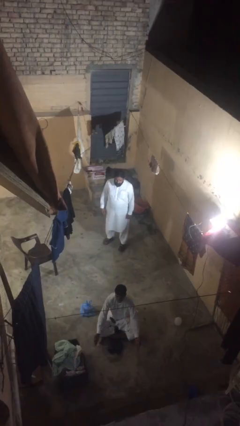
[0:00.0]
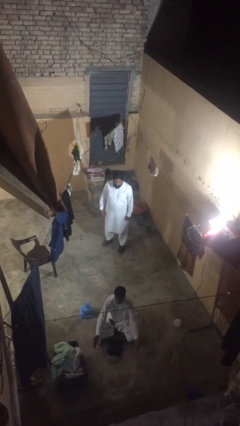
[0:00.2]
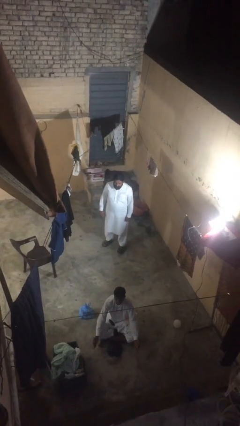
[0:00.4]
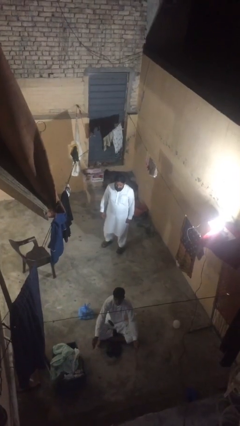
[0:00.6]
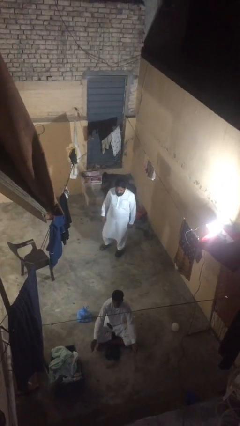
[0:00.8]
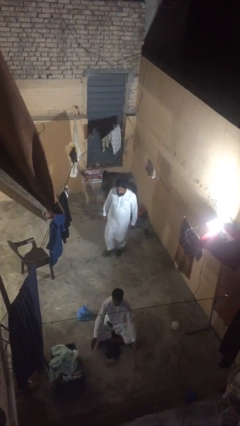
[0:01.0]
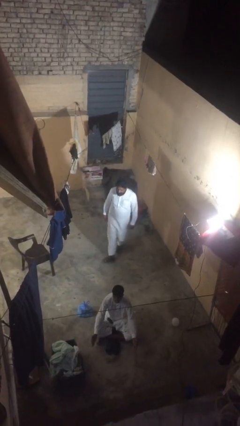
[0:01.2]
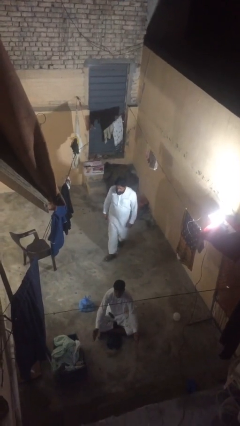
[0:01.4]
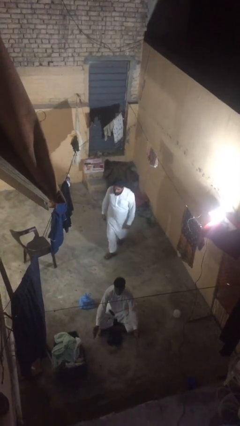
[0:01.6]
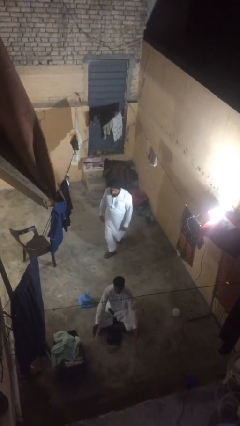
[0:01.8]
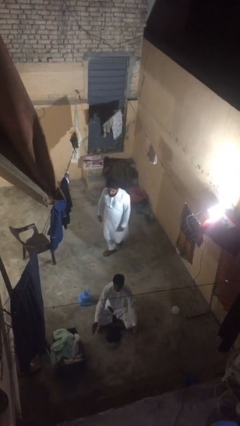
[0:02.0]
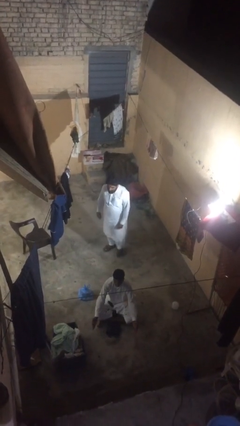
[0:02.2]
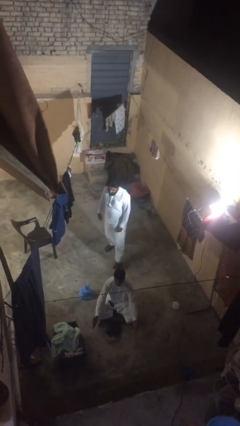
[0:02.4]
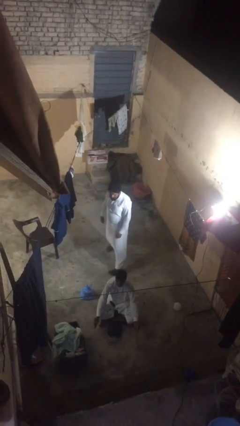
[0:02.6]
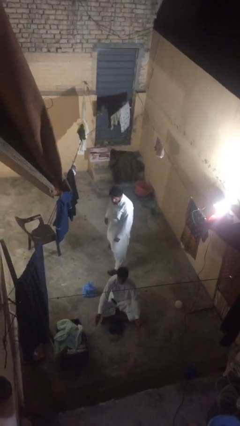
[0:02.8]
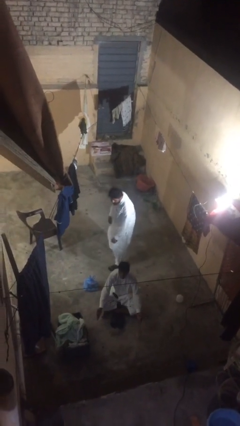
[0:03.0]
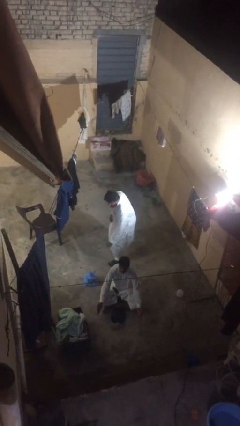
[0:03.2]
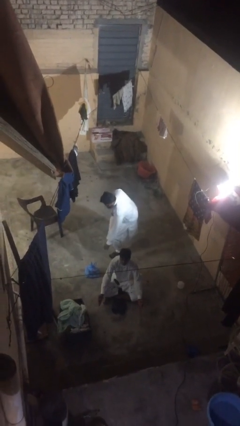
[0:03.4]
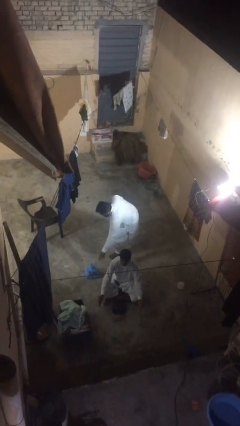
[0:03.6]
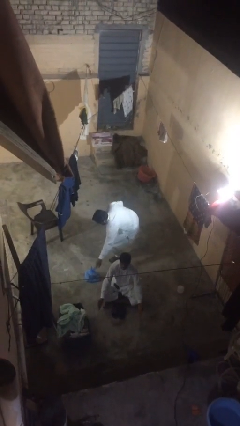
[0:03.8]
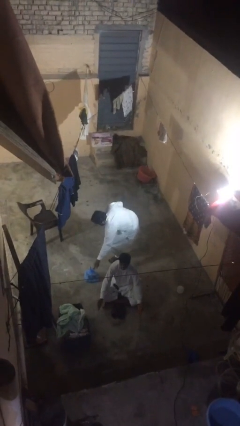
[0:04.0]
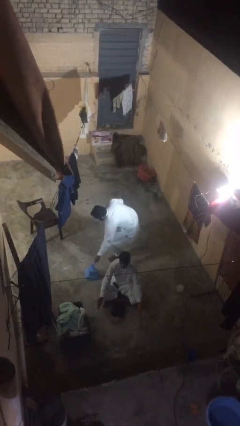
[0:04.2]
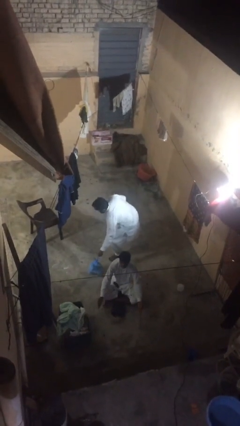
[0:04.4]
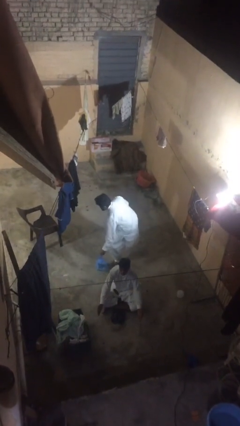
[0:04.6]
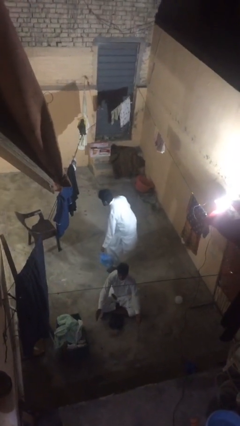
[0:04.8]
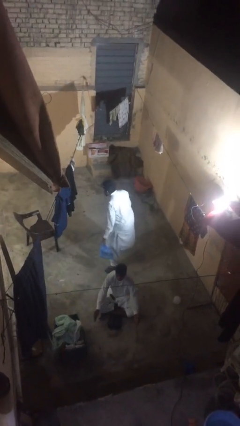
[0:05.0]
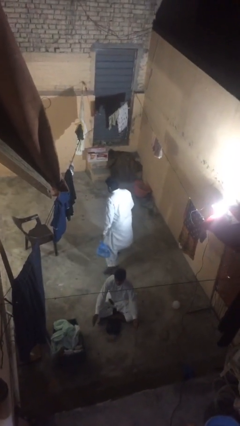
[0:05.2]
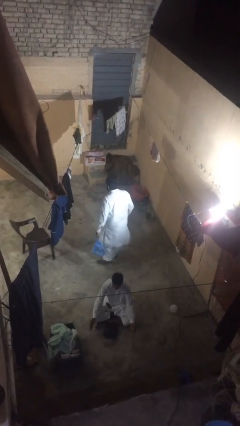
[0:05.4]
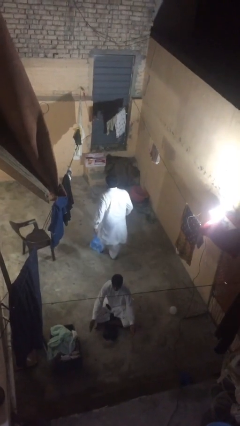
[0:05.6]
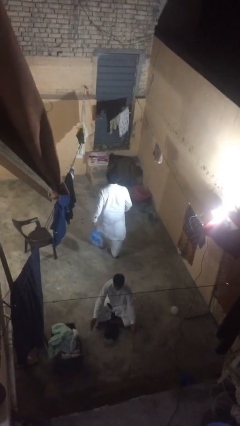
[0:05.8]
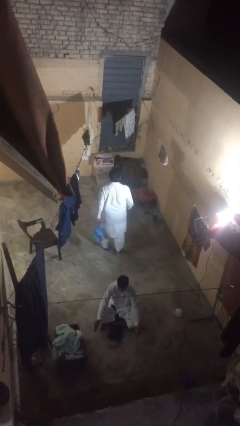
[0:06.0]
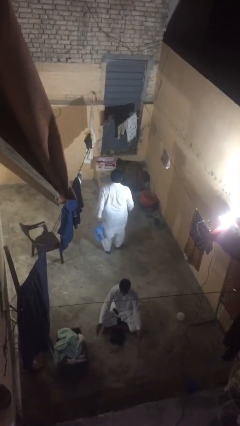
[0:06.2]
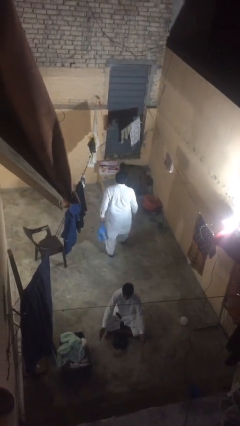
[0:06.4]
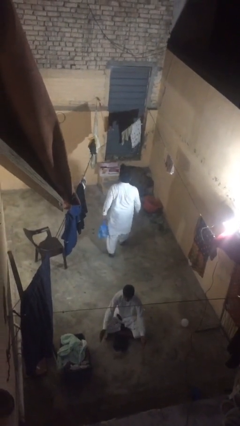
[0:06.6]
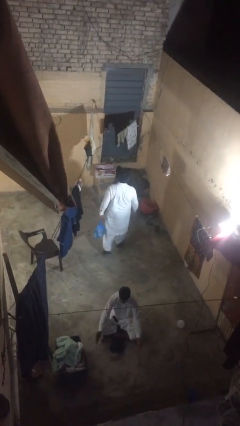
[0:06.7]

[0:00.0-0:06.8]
person steals object from person

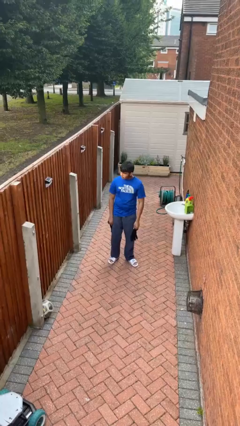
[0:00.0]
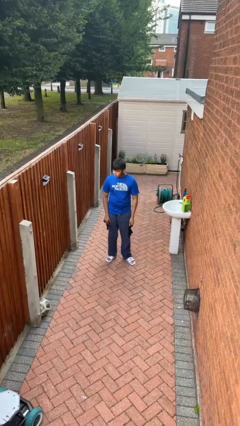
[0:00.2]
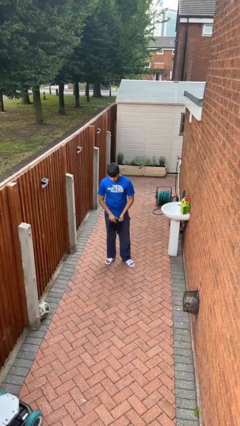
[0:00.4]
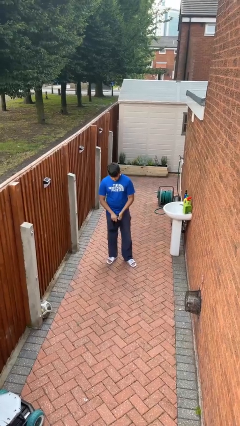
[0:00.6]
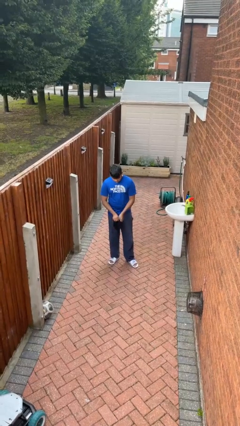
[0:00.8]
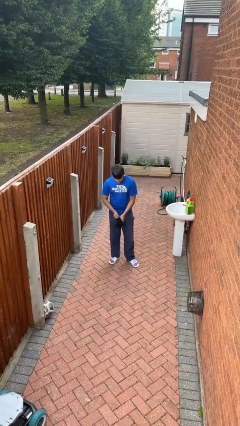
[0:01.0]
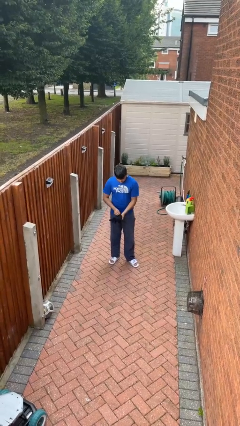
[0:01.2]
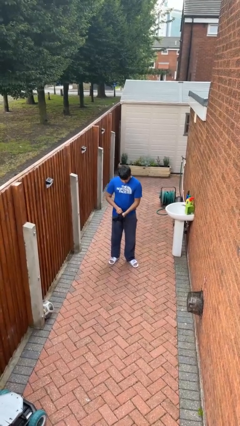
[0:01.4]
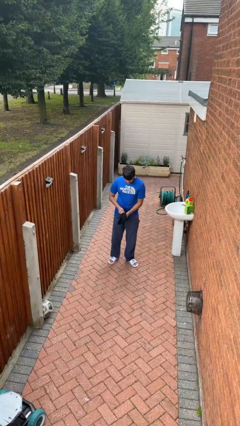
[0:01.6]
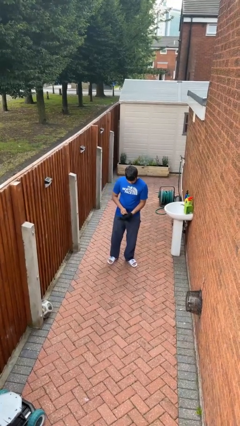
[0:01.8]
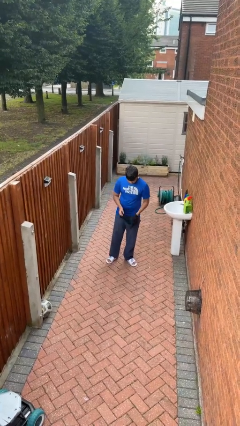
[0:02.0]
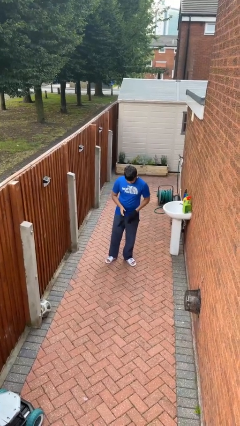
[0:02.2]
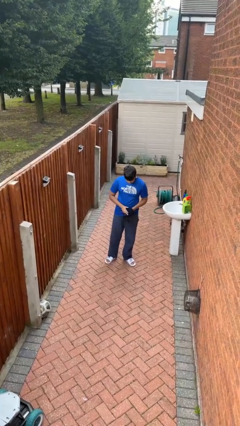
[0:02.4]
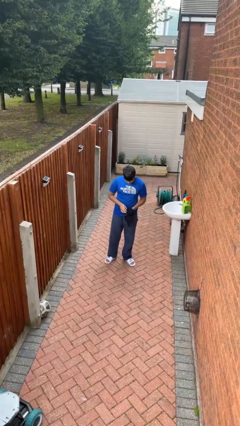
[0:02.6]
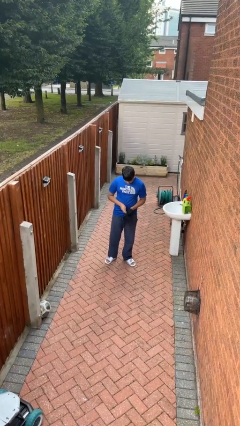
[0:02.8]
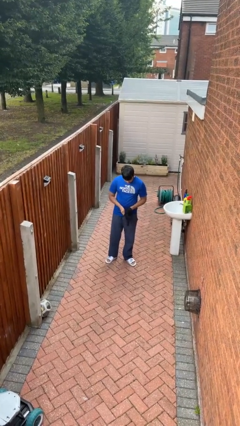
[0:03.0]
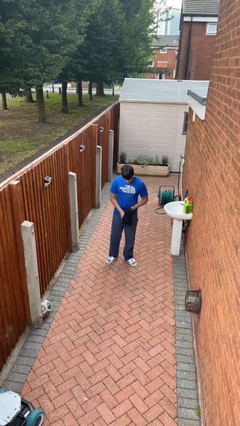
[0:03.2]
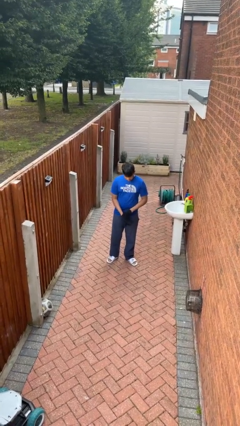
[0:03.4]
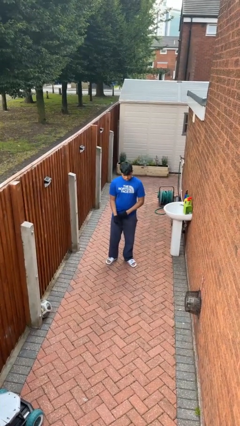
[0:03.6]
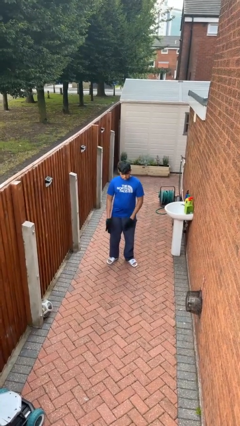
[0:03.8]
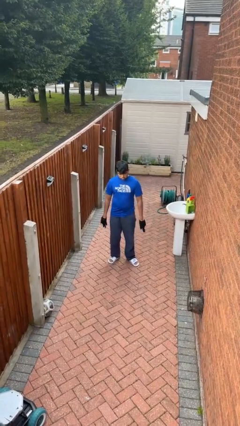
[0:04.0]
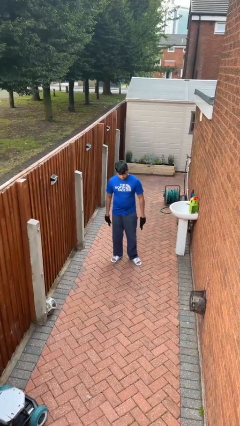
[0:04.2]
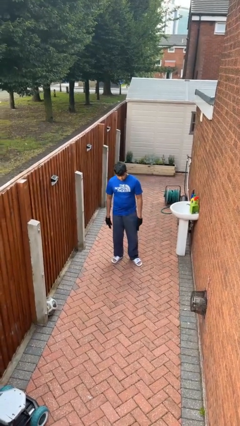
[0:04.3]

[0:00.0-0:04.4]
person puts on gloves

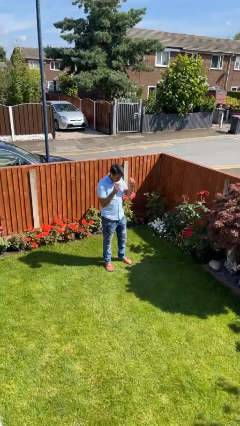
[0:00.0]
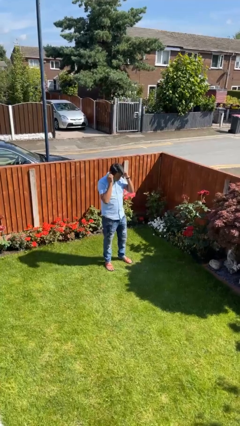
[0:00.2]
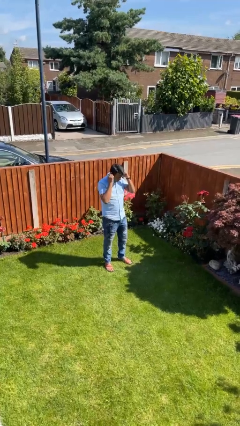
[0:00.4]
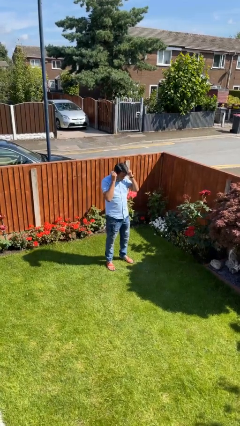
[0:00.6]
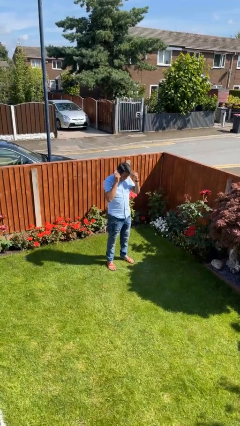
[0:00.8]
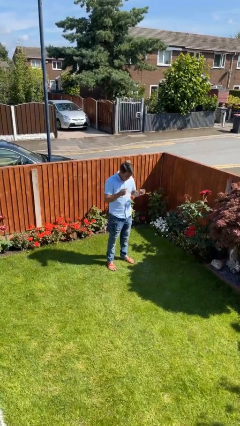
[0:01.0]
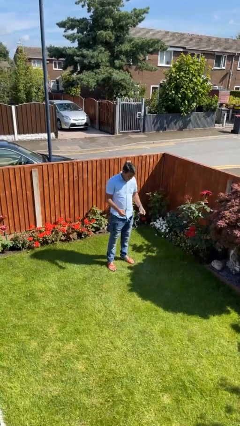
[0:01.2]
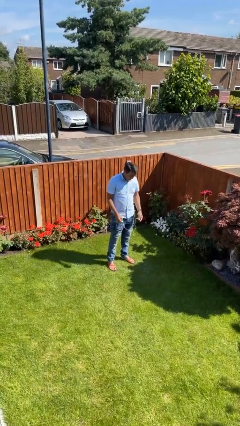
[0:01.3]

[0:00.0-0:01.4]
person takes off headphones

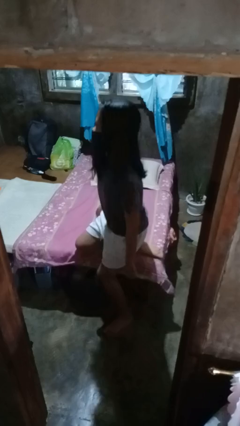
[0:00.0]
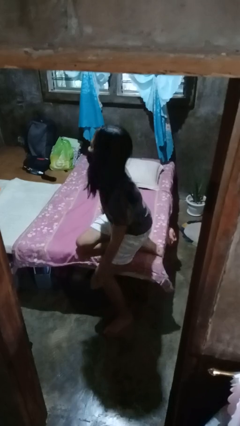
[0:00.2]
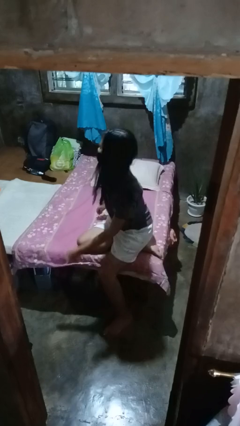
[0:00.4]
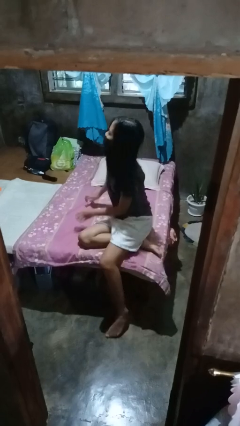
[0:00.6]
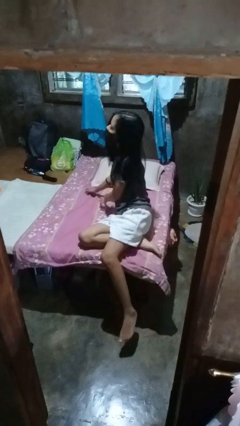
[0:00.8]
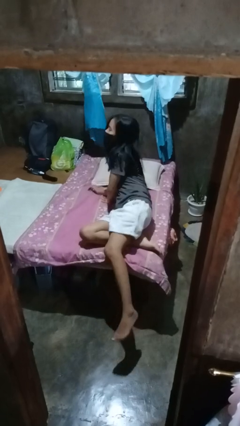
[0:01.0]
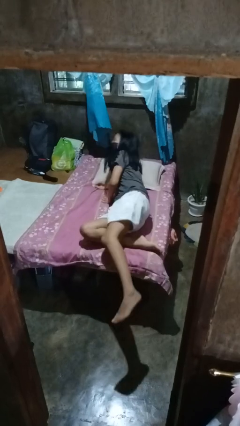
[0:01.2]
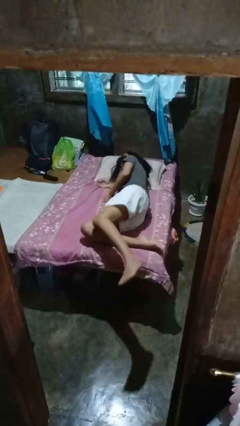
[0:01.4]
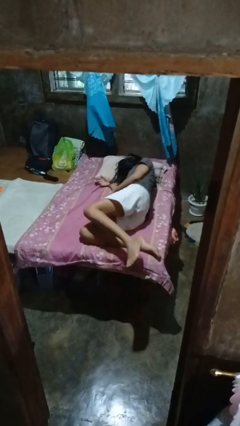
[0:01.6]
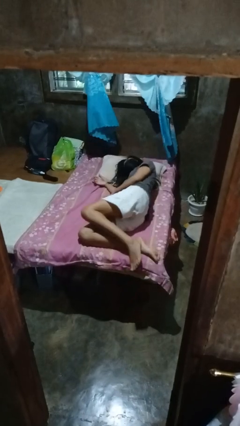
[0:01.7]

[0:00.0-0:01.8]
person lies down on bed

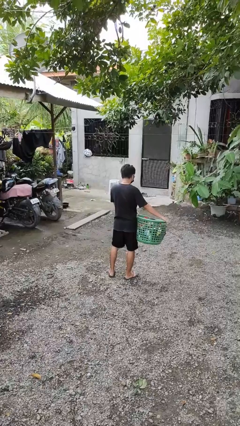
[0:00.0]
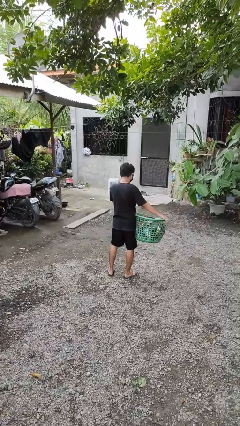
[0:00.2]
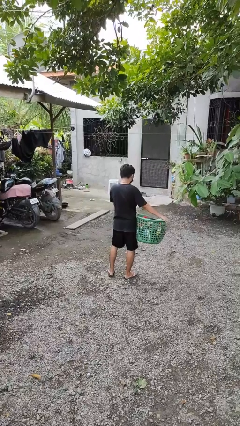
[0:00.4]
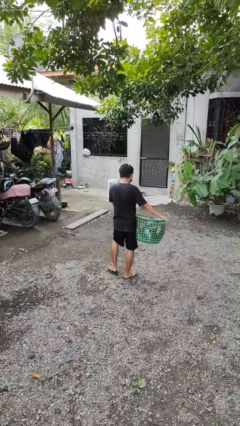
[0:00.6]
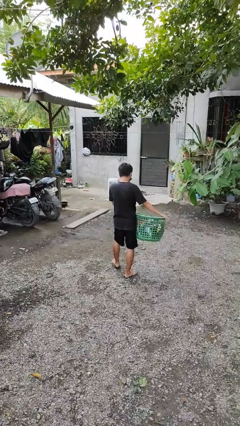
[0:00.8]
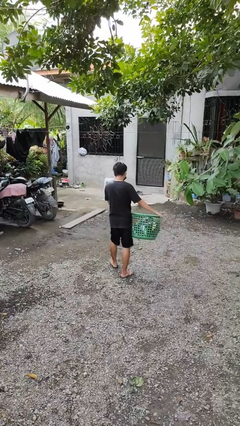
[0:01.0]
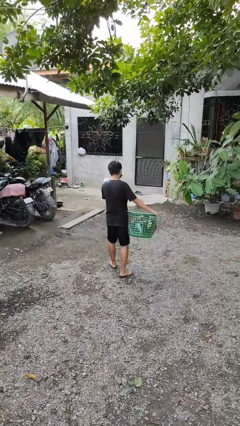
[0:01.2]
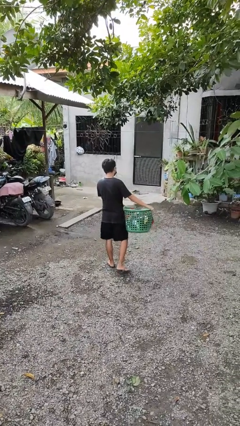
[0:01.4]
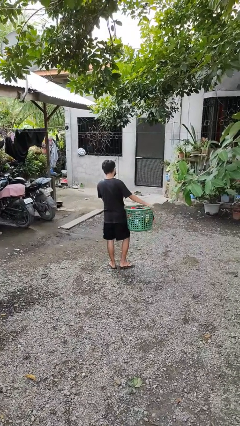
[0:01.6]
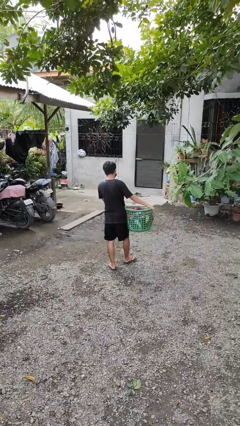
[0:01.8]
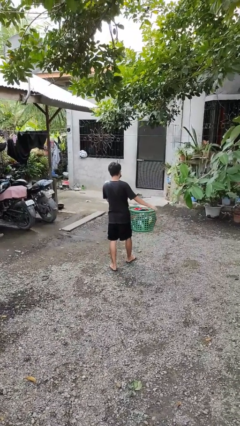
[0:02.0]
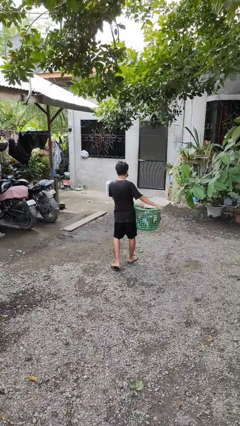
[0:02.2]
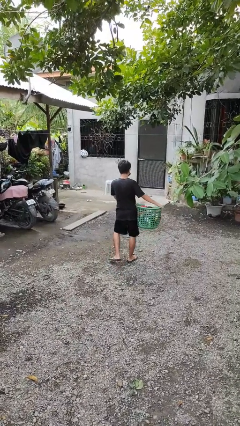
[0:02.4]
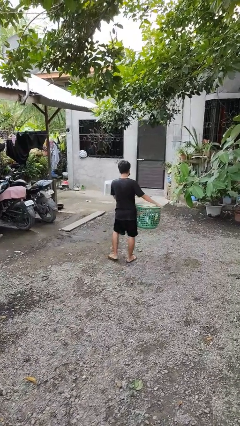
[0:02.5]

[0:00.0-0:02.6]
person carries laundry basket

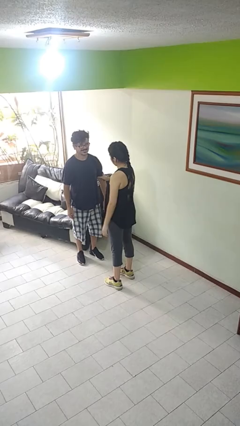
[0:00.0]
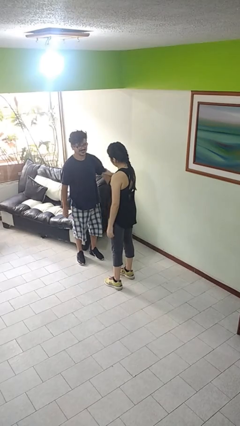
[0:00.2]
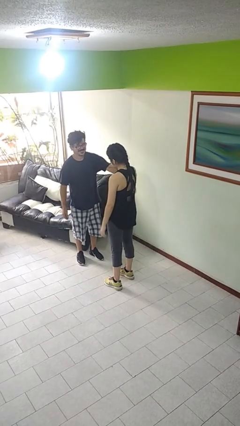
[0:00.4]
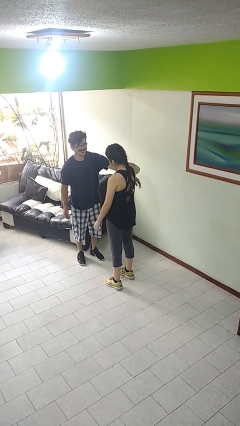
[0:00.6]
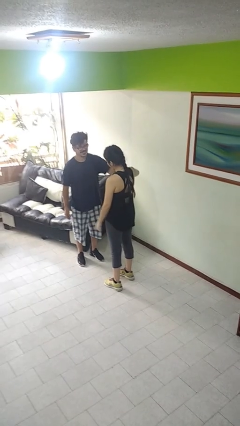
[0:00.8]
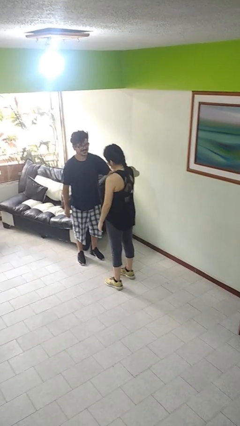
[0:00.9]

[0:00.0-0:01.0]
person grabs person by bicep
